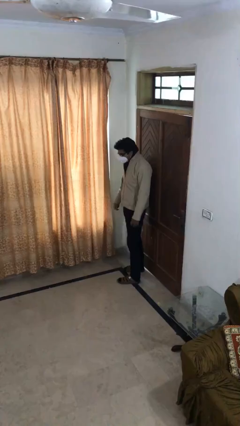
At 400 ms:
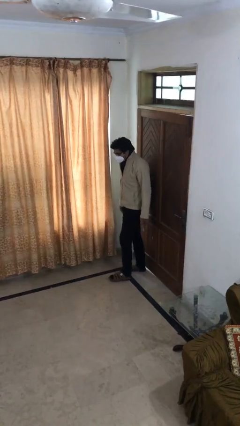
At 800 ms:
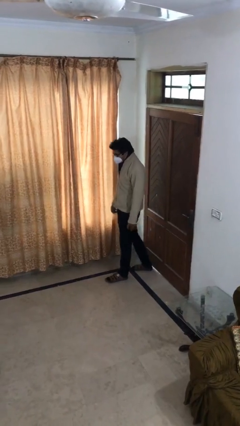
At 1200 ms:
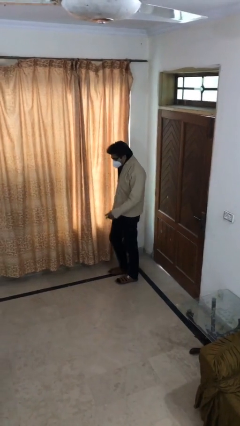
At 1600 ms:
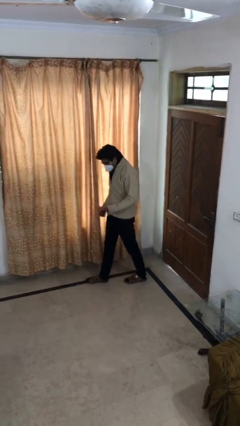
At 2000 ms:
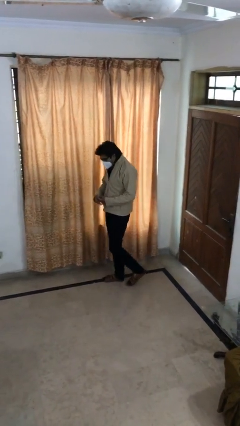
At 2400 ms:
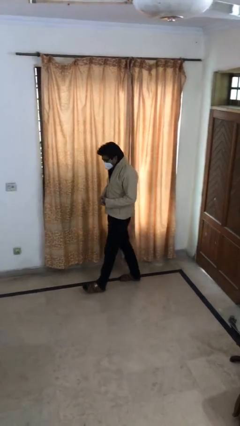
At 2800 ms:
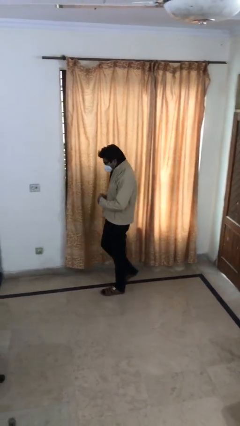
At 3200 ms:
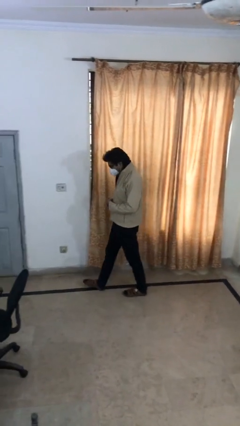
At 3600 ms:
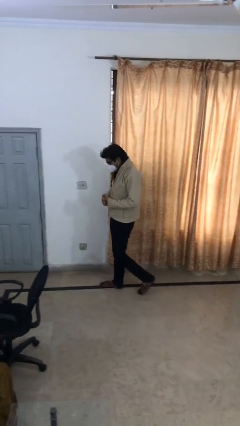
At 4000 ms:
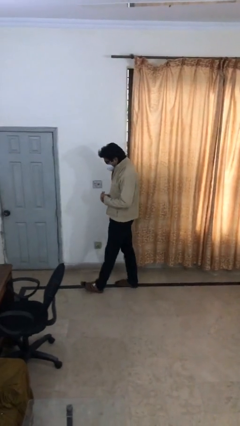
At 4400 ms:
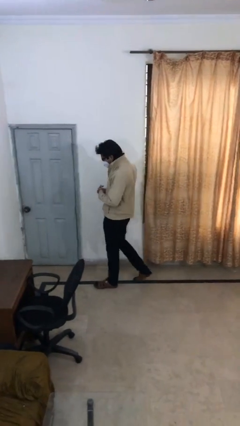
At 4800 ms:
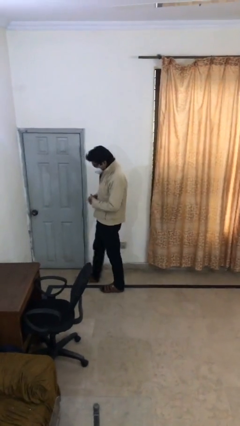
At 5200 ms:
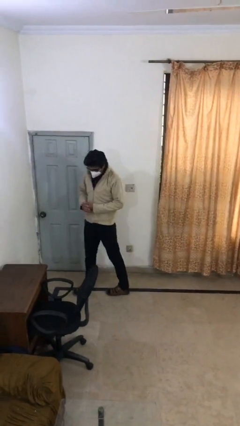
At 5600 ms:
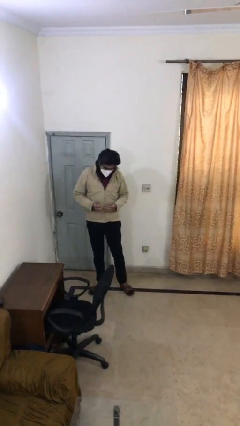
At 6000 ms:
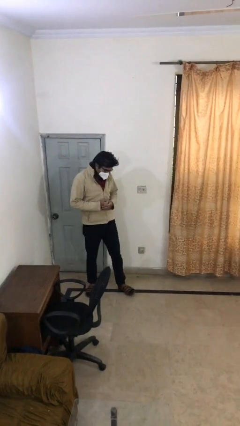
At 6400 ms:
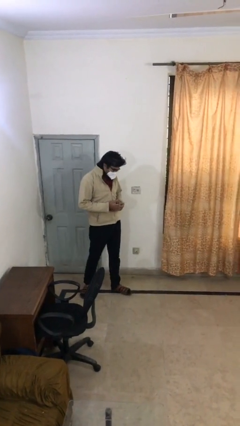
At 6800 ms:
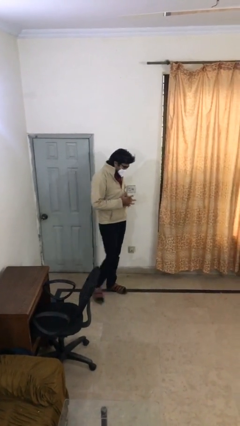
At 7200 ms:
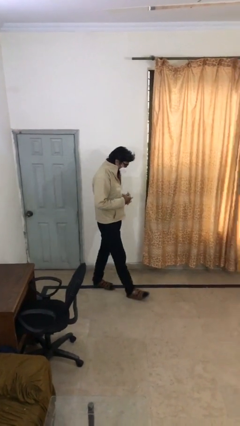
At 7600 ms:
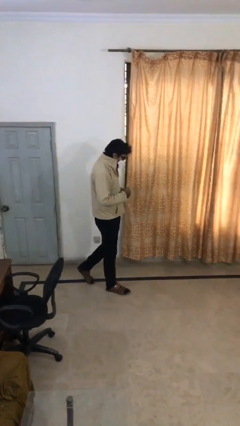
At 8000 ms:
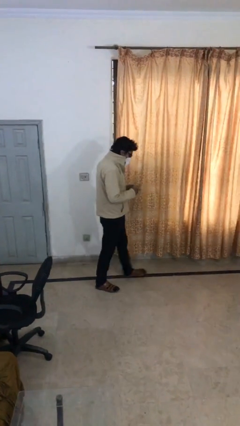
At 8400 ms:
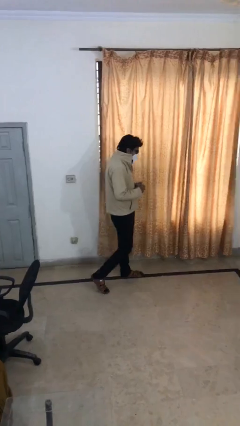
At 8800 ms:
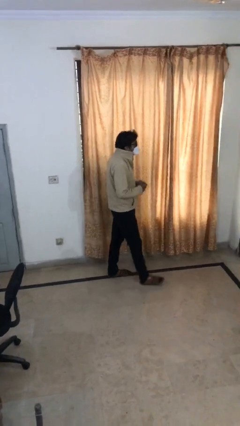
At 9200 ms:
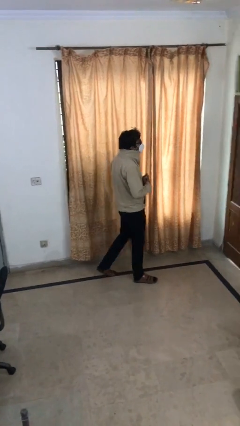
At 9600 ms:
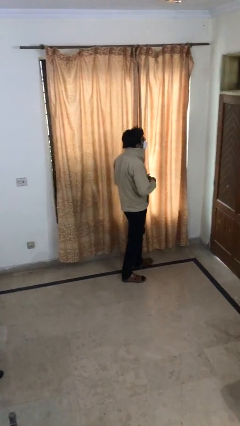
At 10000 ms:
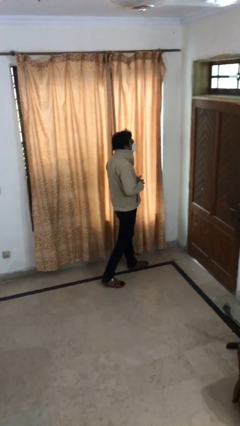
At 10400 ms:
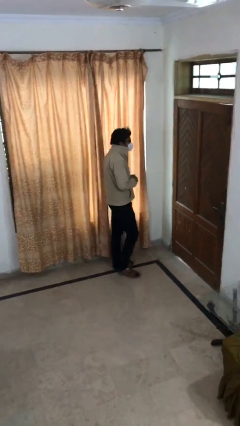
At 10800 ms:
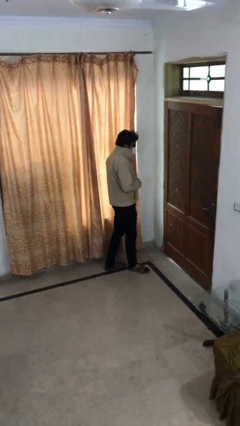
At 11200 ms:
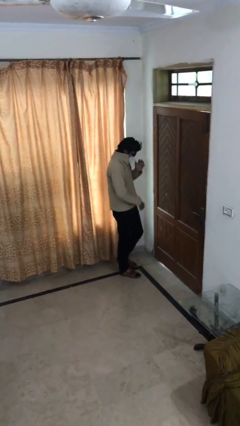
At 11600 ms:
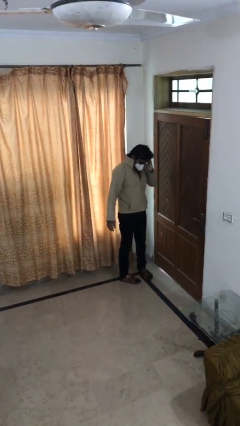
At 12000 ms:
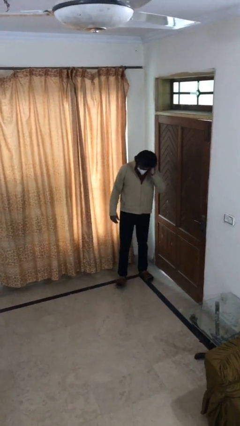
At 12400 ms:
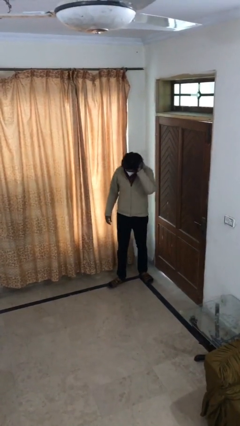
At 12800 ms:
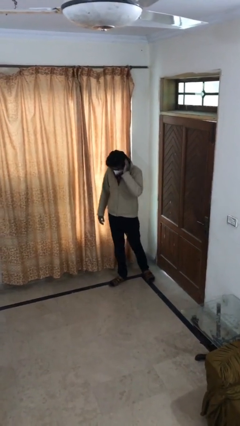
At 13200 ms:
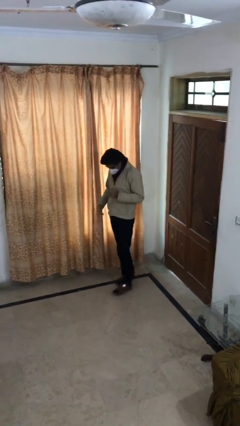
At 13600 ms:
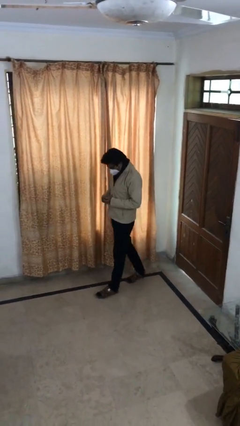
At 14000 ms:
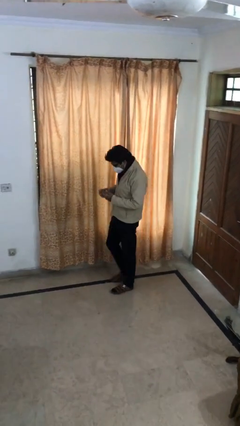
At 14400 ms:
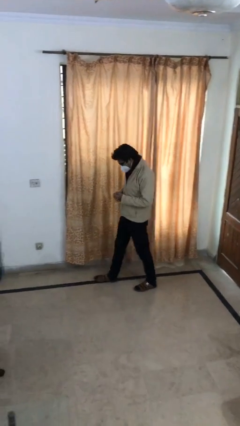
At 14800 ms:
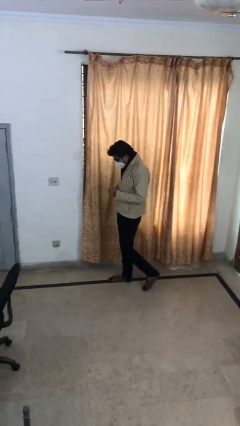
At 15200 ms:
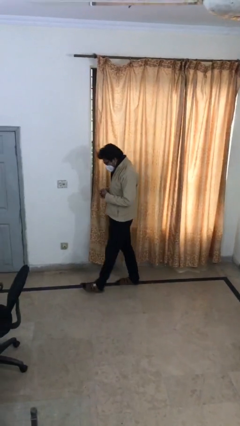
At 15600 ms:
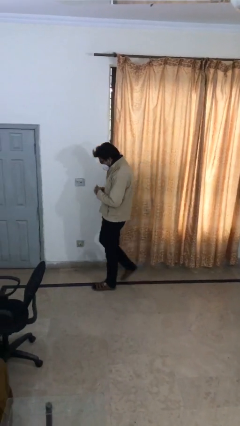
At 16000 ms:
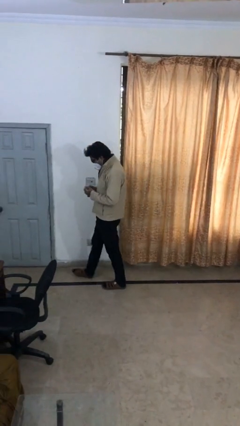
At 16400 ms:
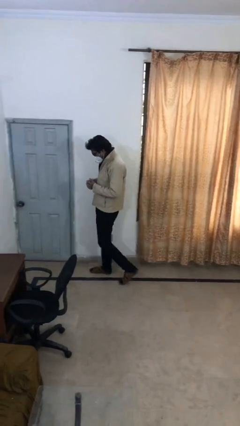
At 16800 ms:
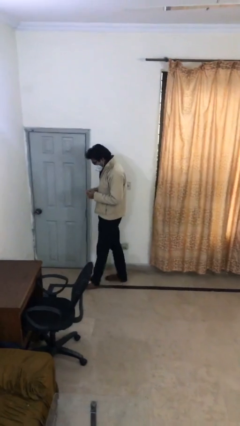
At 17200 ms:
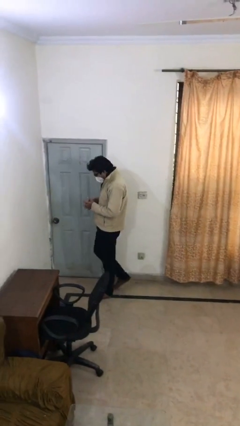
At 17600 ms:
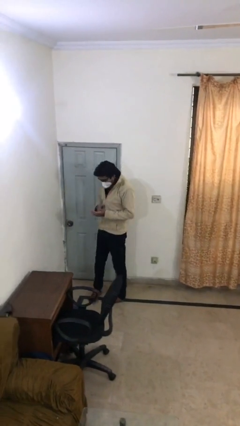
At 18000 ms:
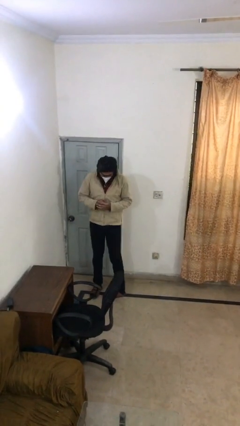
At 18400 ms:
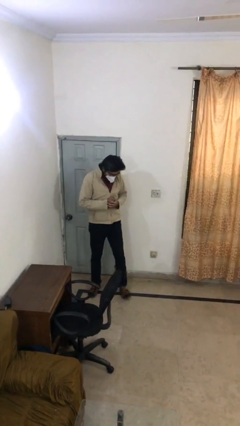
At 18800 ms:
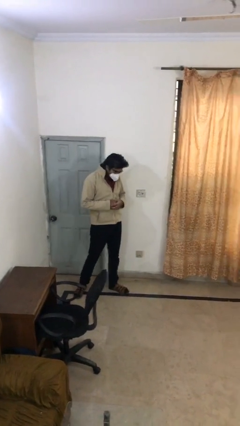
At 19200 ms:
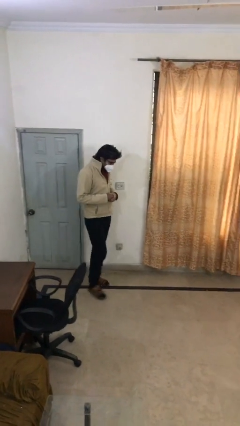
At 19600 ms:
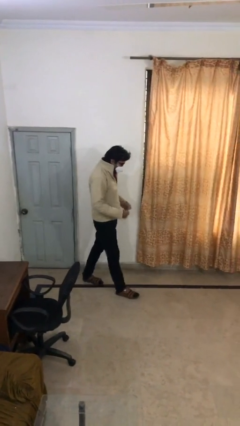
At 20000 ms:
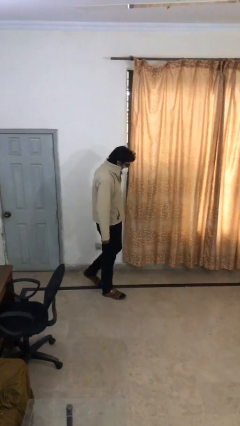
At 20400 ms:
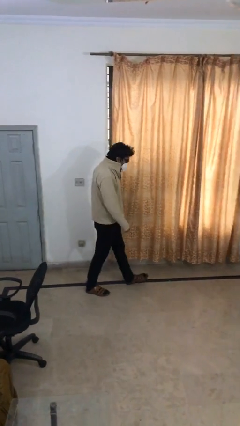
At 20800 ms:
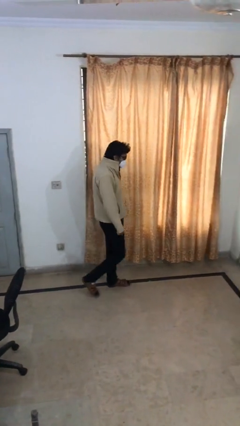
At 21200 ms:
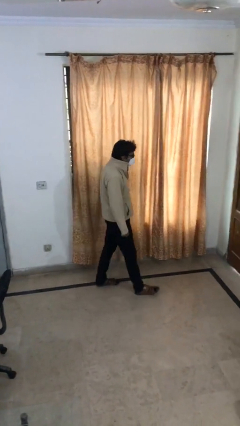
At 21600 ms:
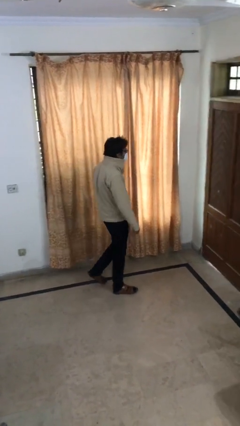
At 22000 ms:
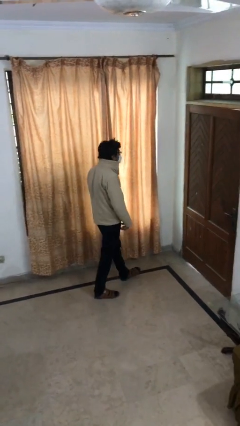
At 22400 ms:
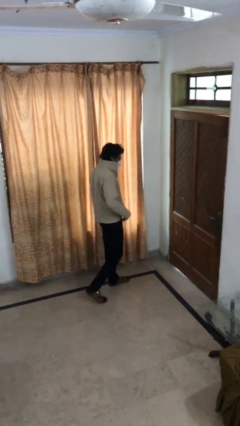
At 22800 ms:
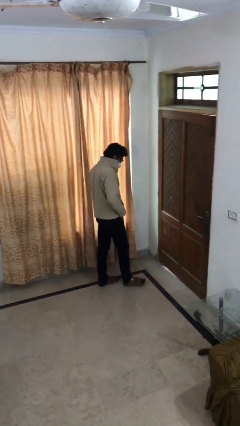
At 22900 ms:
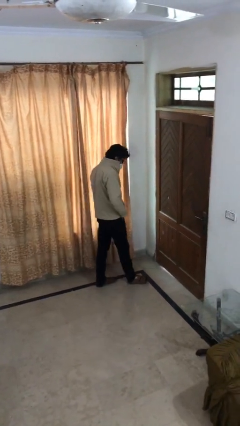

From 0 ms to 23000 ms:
person walks

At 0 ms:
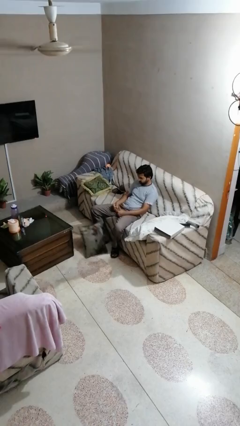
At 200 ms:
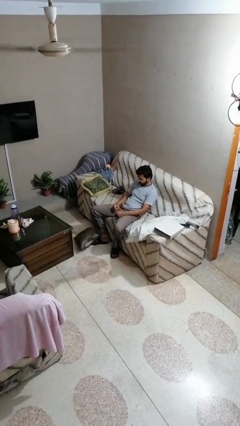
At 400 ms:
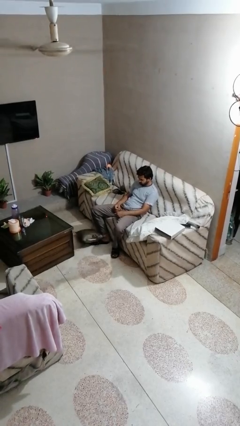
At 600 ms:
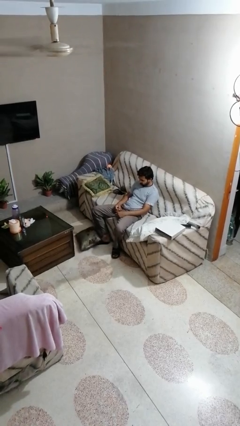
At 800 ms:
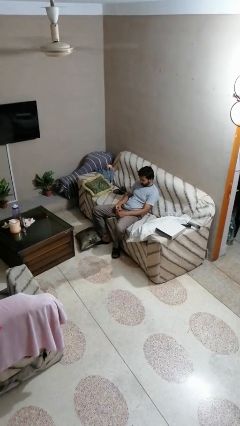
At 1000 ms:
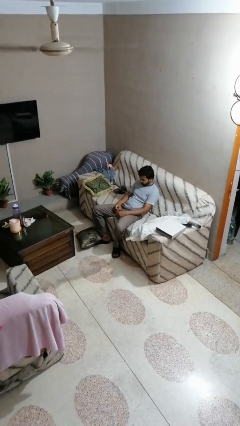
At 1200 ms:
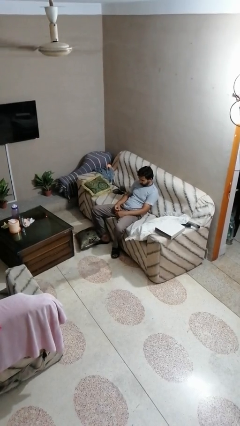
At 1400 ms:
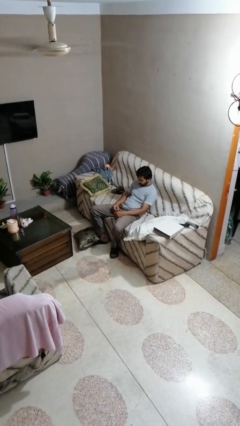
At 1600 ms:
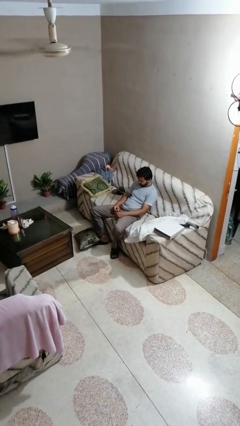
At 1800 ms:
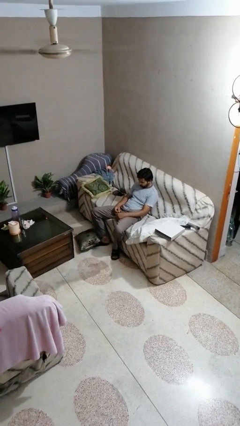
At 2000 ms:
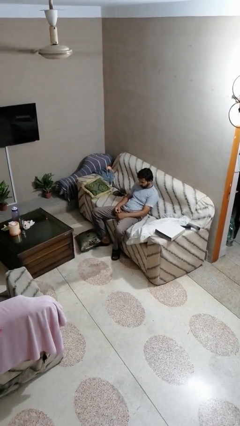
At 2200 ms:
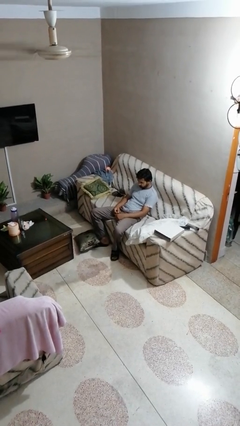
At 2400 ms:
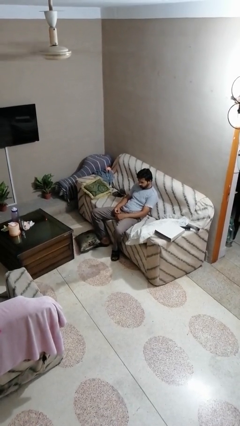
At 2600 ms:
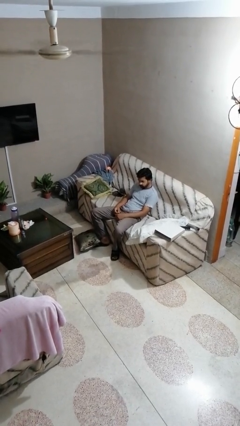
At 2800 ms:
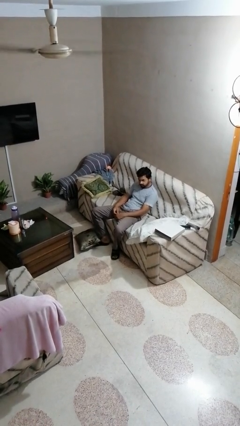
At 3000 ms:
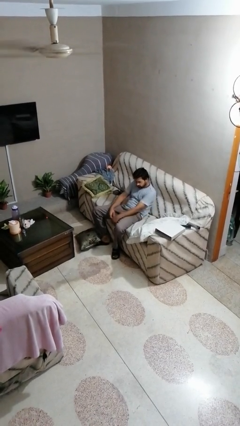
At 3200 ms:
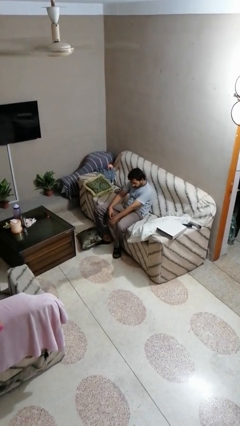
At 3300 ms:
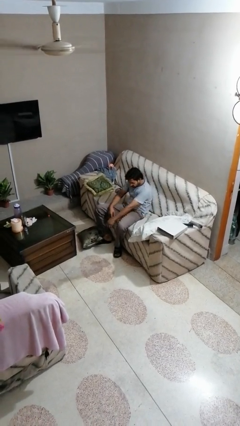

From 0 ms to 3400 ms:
person drops object

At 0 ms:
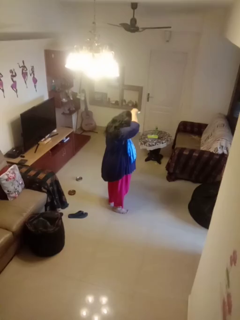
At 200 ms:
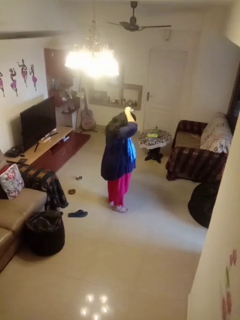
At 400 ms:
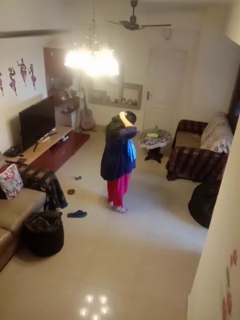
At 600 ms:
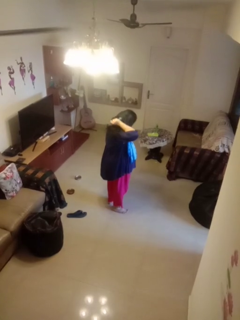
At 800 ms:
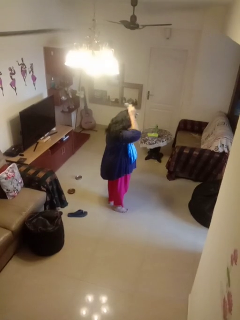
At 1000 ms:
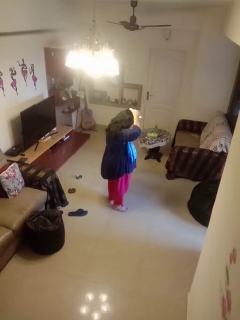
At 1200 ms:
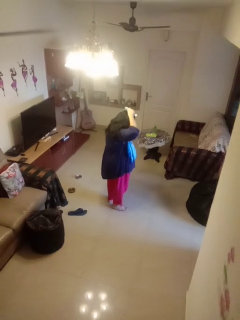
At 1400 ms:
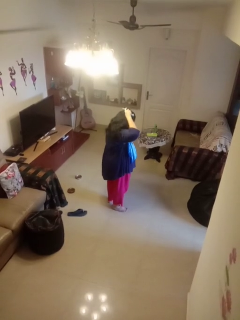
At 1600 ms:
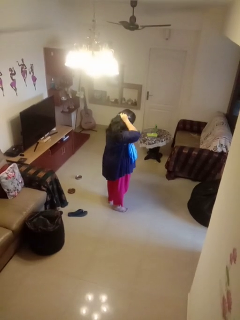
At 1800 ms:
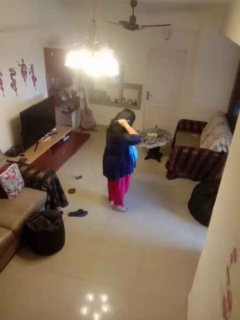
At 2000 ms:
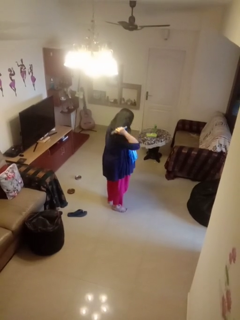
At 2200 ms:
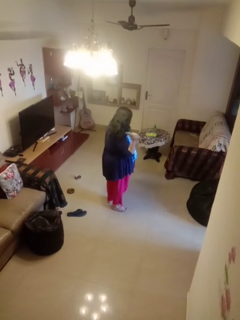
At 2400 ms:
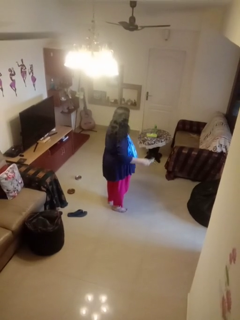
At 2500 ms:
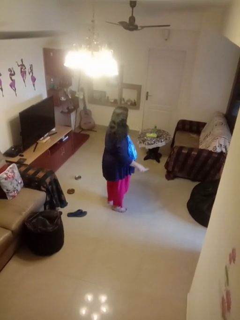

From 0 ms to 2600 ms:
person brushes hair

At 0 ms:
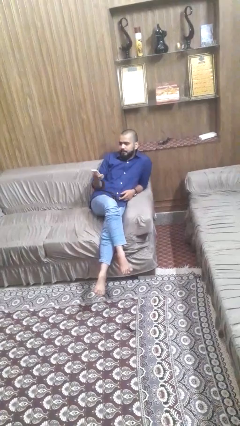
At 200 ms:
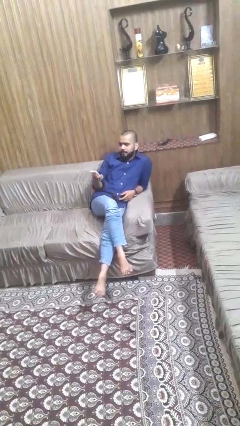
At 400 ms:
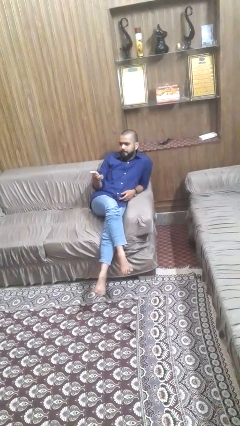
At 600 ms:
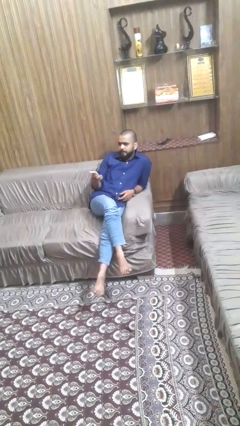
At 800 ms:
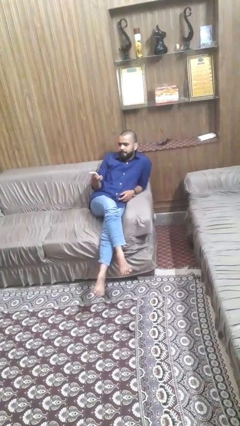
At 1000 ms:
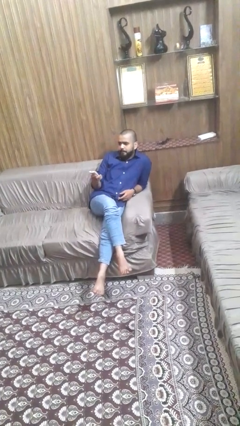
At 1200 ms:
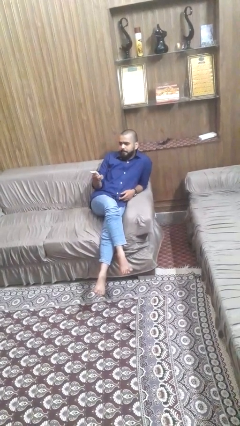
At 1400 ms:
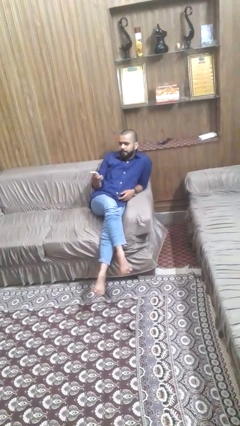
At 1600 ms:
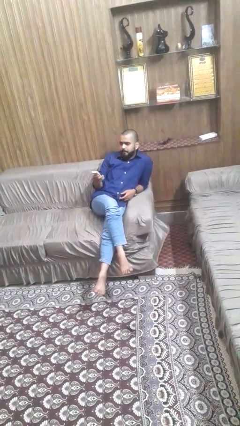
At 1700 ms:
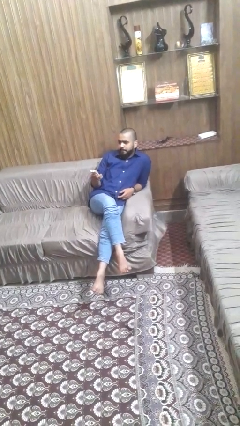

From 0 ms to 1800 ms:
person uses television remote
